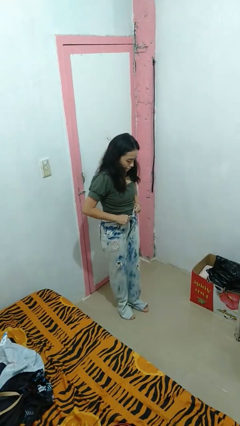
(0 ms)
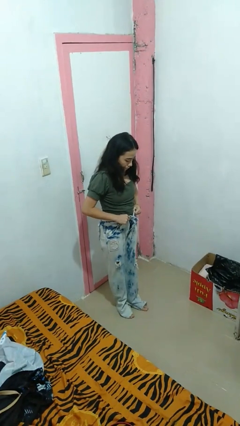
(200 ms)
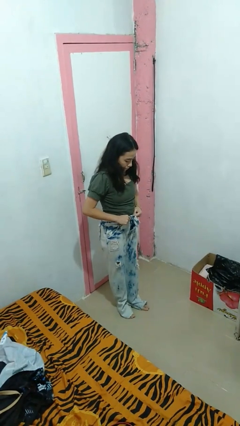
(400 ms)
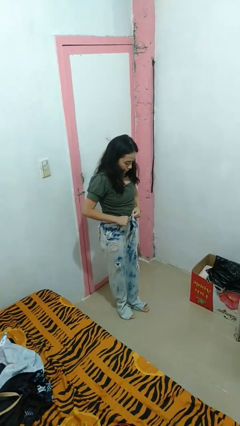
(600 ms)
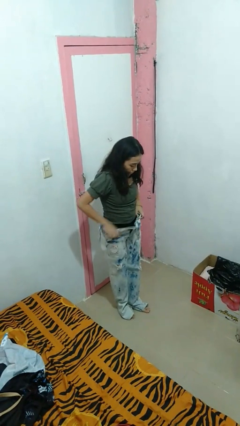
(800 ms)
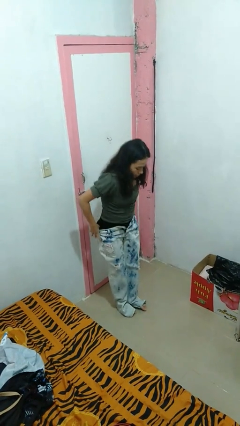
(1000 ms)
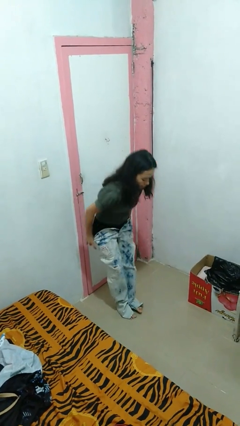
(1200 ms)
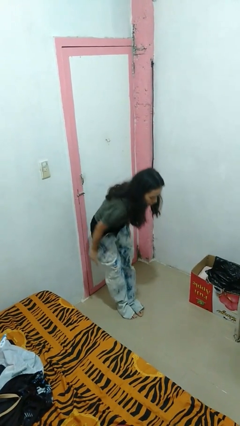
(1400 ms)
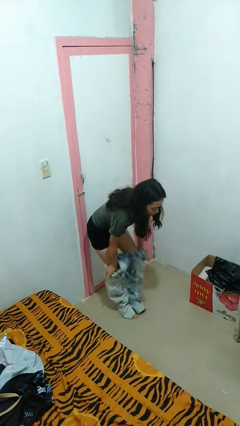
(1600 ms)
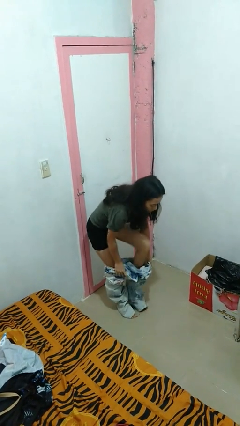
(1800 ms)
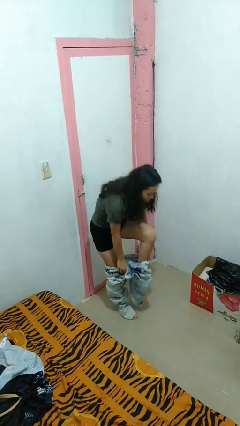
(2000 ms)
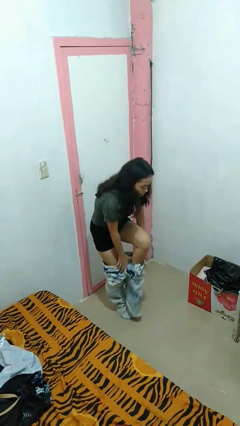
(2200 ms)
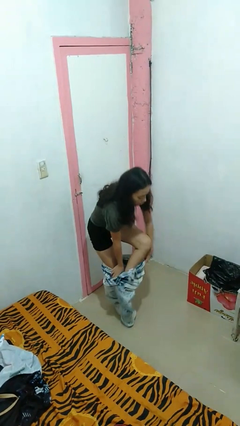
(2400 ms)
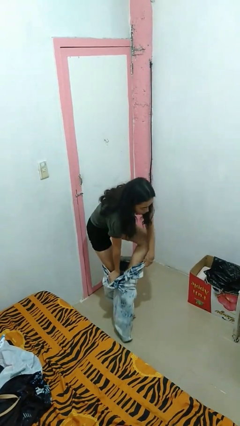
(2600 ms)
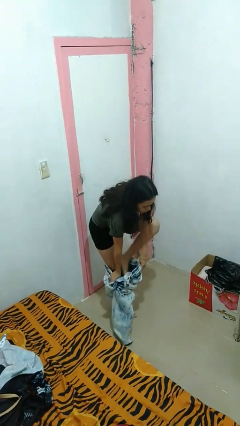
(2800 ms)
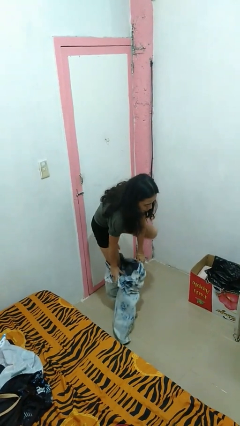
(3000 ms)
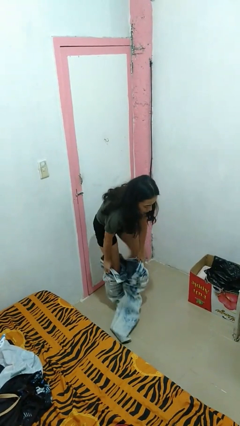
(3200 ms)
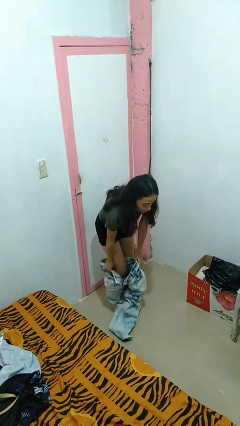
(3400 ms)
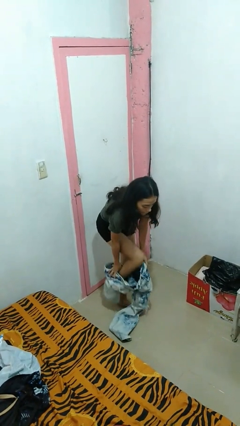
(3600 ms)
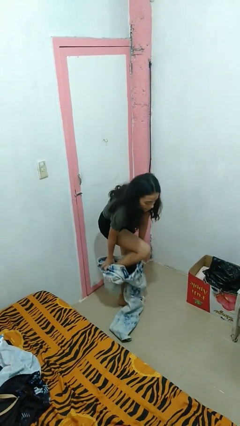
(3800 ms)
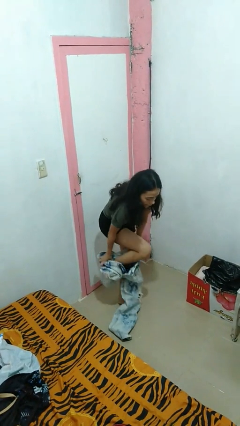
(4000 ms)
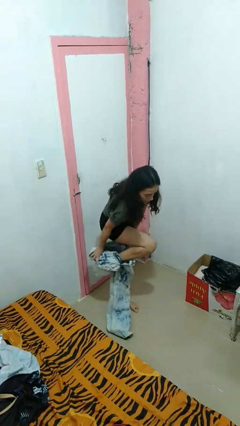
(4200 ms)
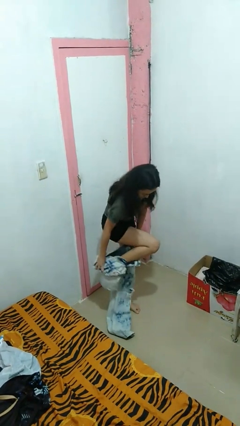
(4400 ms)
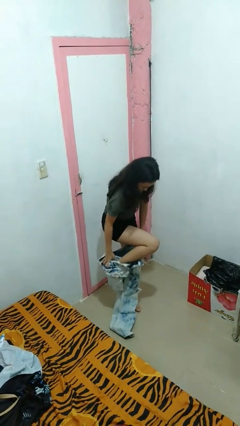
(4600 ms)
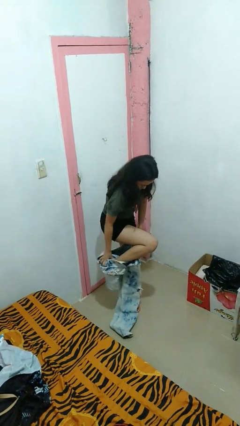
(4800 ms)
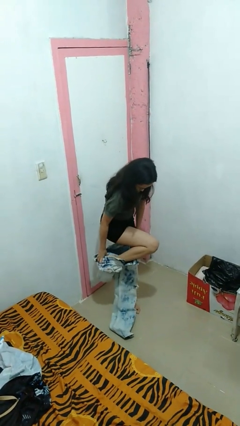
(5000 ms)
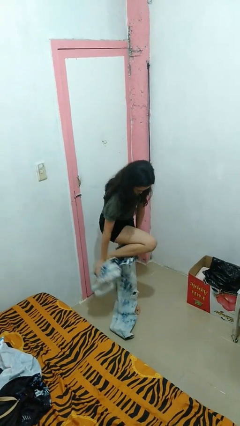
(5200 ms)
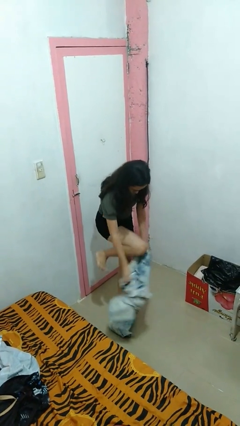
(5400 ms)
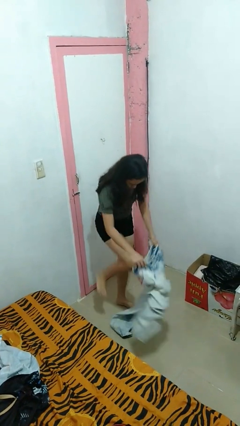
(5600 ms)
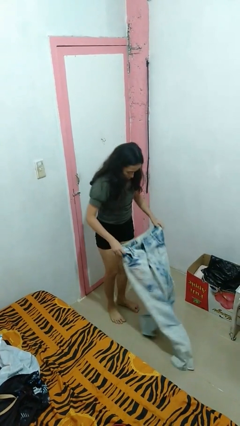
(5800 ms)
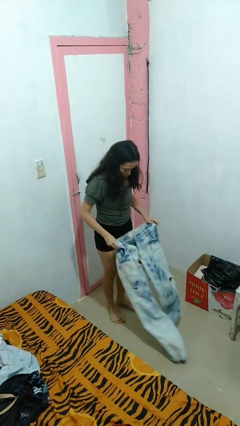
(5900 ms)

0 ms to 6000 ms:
person takes off pants

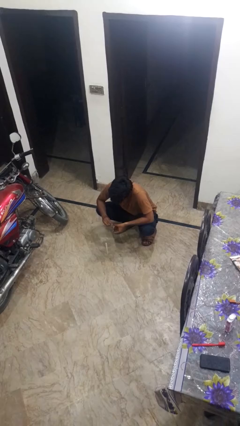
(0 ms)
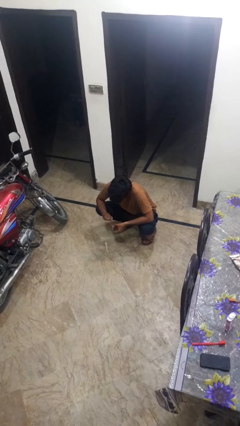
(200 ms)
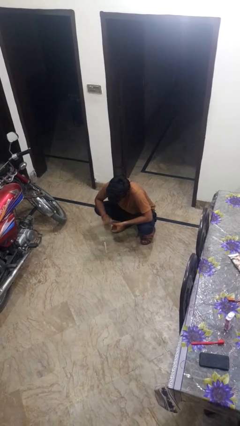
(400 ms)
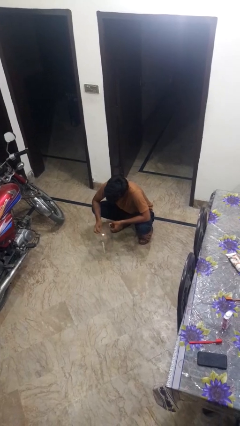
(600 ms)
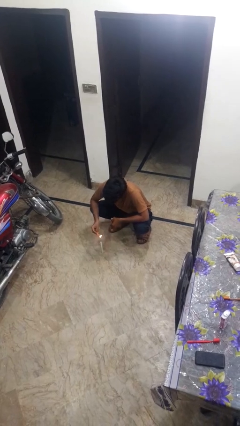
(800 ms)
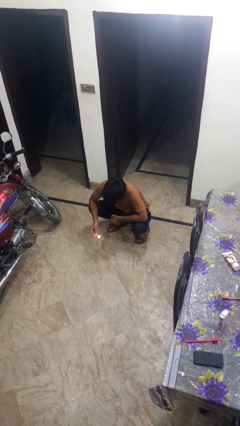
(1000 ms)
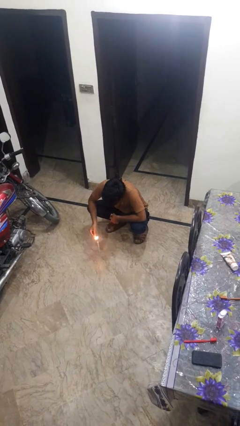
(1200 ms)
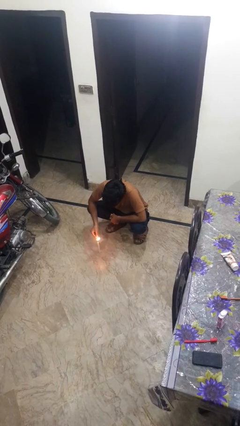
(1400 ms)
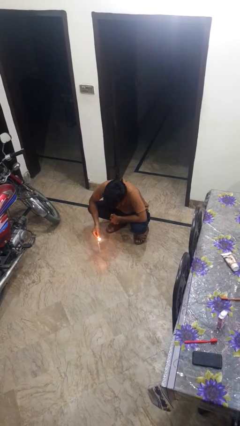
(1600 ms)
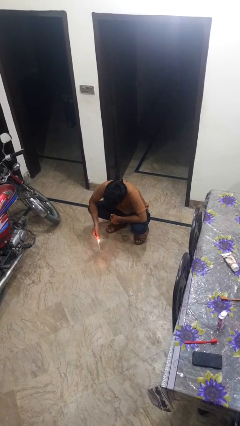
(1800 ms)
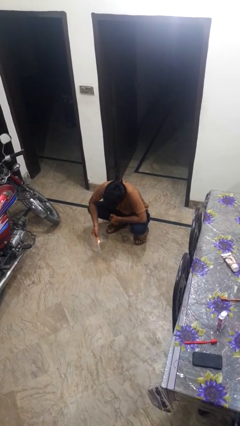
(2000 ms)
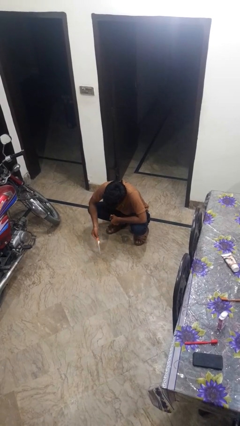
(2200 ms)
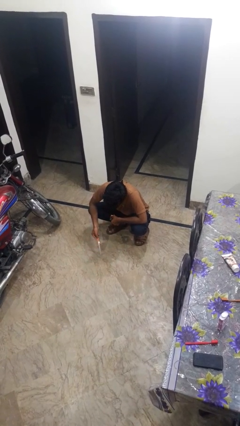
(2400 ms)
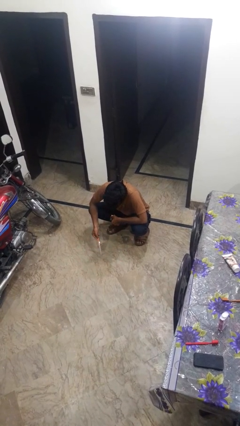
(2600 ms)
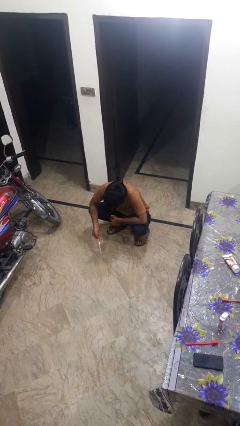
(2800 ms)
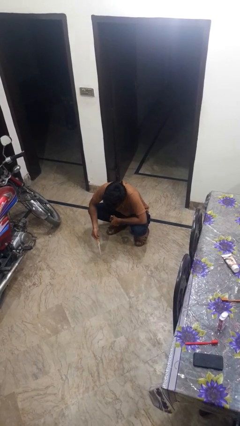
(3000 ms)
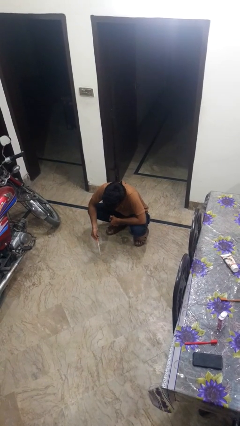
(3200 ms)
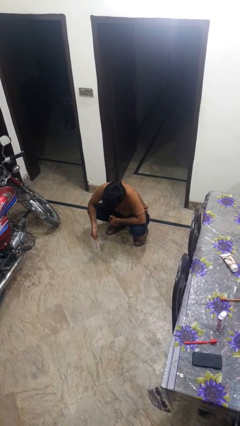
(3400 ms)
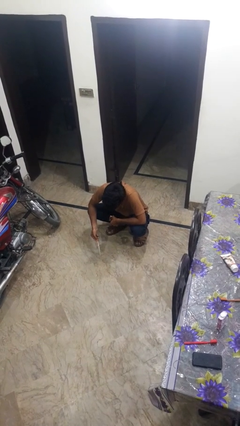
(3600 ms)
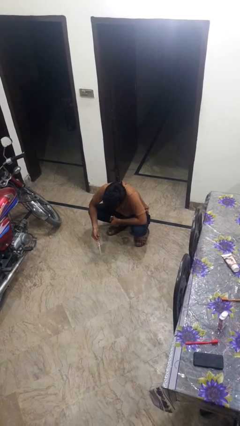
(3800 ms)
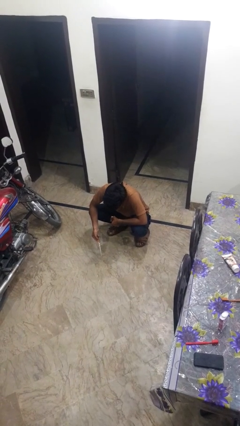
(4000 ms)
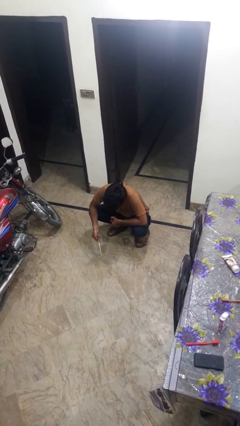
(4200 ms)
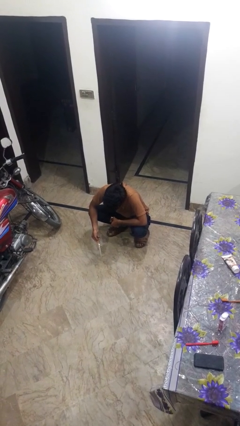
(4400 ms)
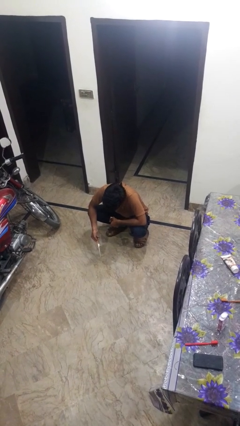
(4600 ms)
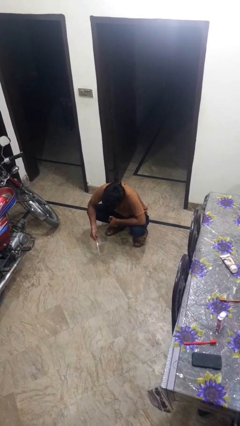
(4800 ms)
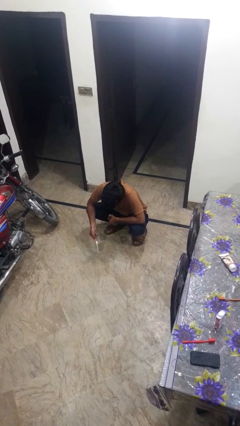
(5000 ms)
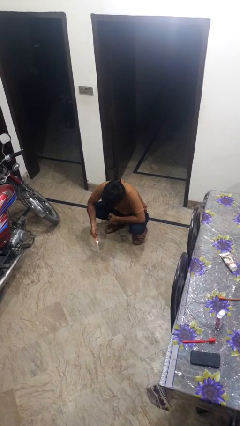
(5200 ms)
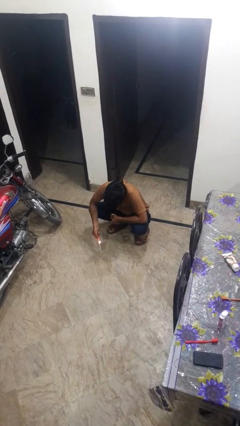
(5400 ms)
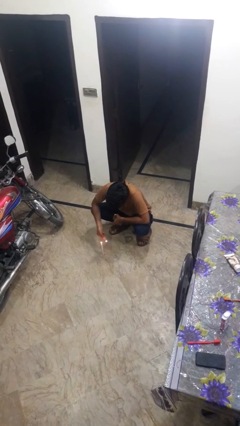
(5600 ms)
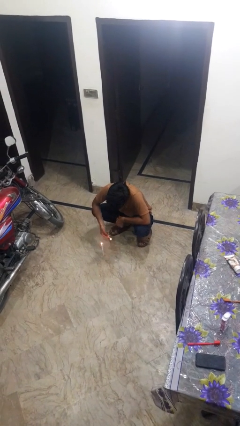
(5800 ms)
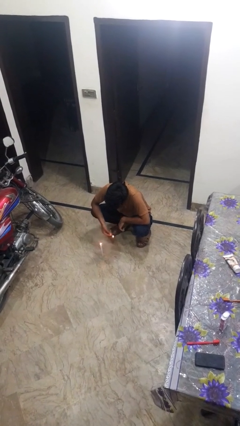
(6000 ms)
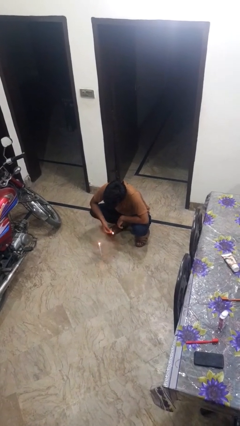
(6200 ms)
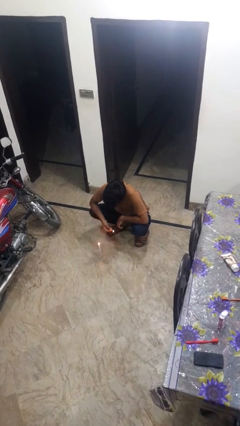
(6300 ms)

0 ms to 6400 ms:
person lights candle

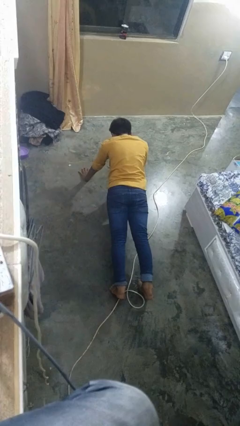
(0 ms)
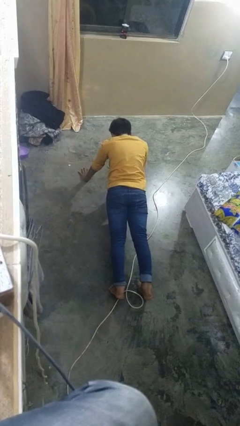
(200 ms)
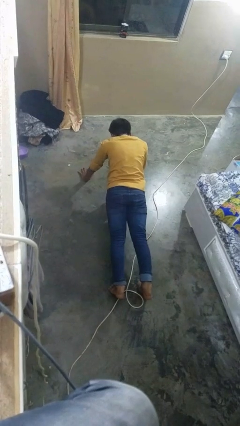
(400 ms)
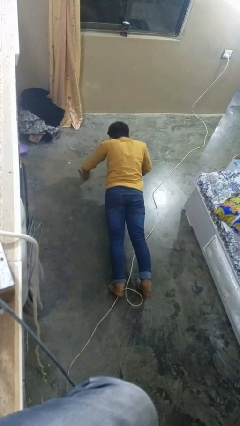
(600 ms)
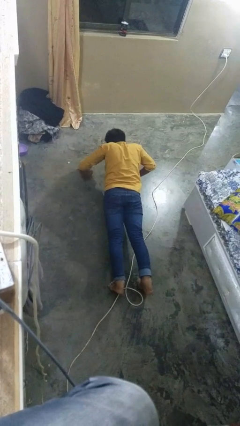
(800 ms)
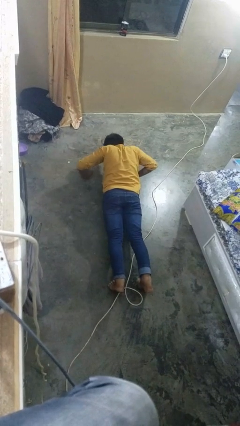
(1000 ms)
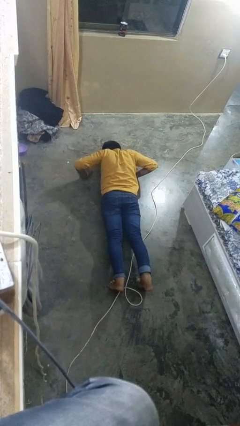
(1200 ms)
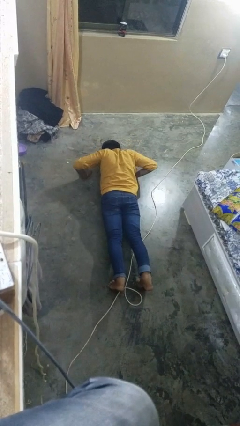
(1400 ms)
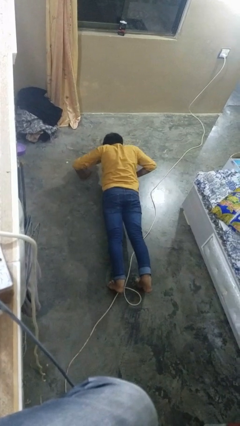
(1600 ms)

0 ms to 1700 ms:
person exercises with pushup

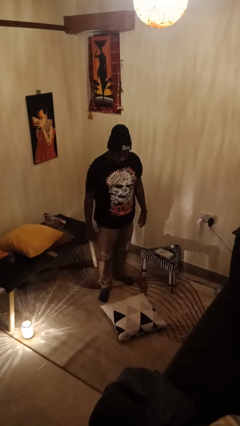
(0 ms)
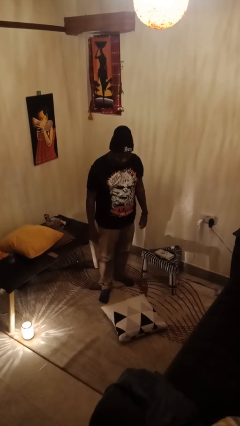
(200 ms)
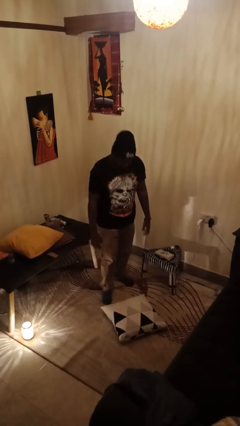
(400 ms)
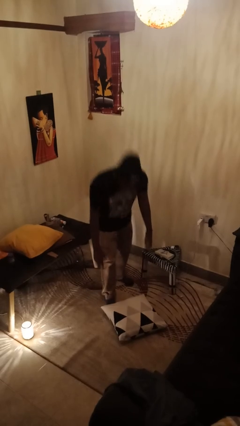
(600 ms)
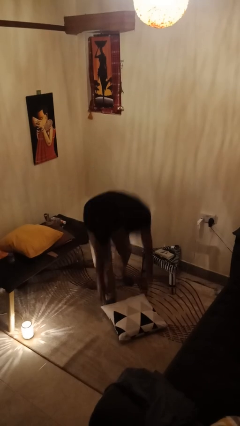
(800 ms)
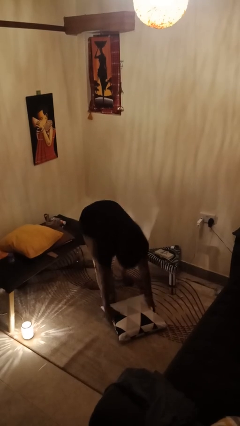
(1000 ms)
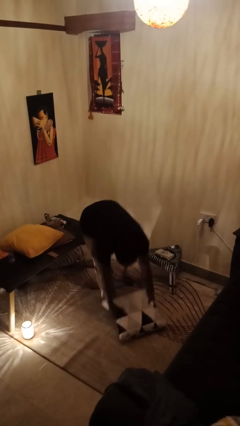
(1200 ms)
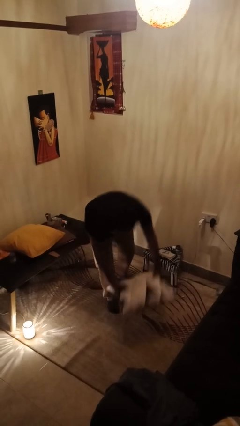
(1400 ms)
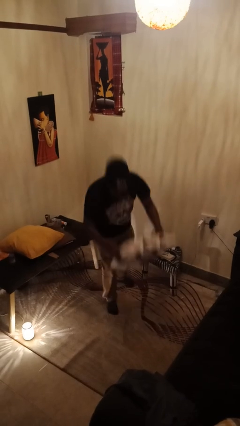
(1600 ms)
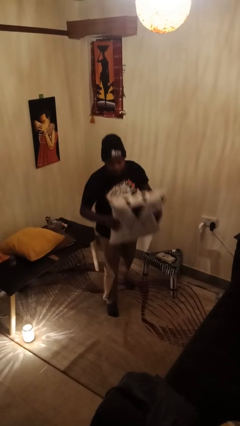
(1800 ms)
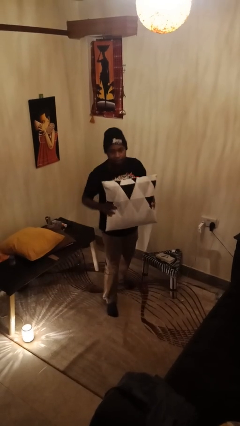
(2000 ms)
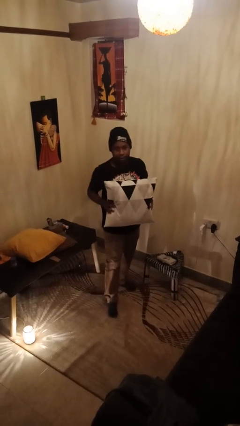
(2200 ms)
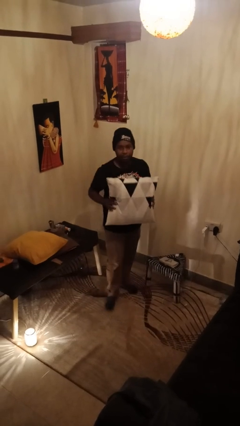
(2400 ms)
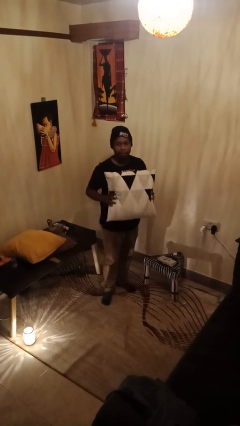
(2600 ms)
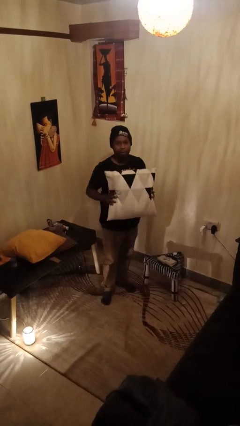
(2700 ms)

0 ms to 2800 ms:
person picks up object from floor

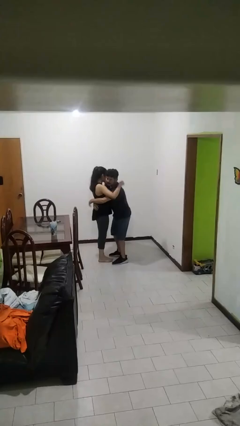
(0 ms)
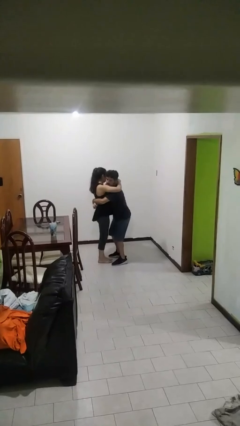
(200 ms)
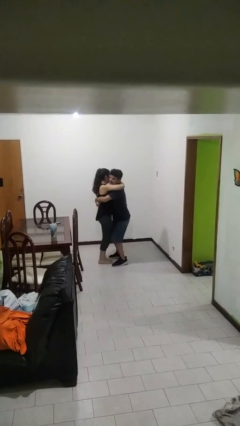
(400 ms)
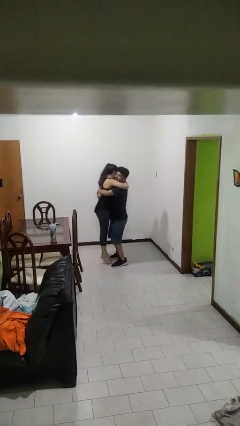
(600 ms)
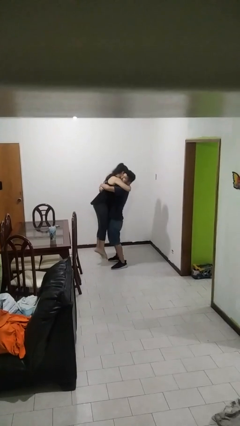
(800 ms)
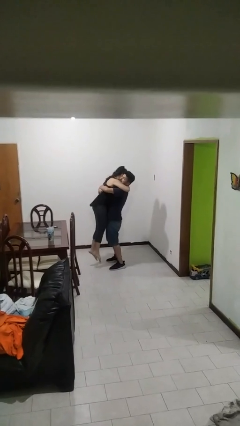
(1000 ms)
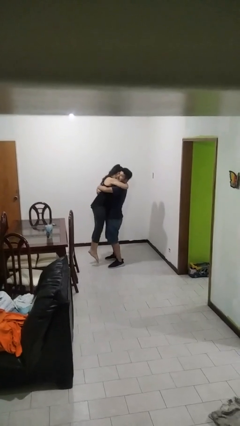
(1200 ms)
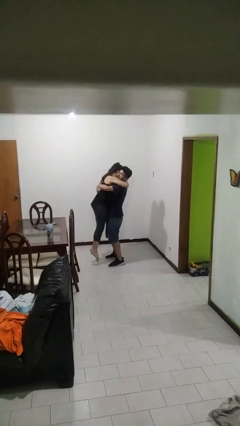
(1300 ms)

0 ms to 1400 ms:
person picks up person
